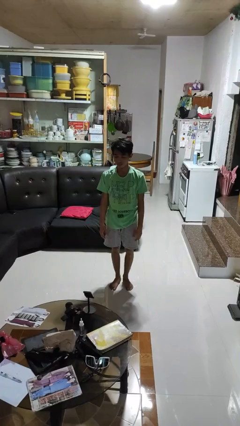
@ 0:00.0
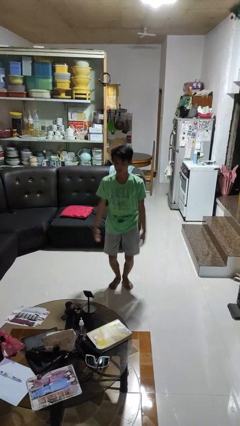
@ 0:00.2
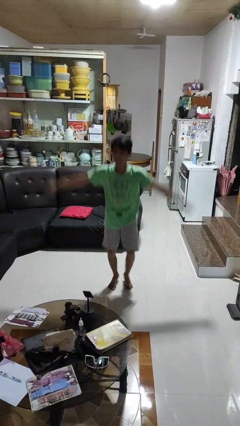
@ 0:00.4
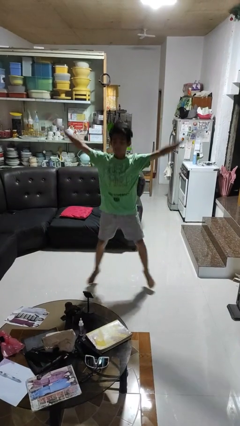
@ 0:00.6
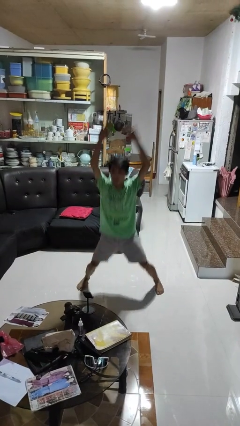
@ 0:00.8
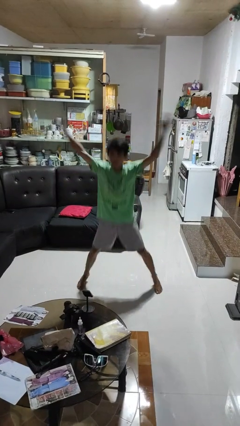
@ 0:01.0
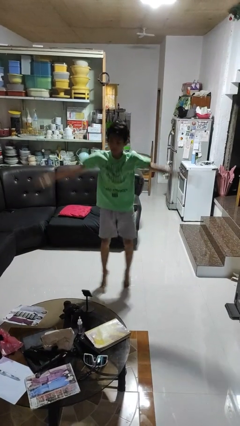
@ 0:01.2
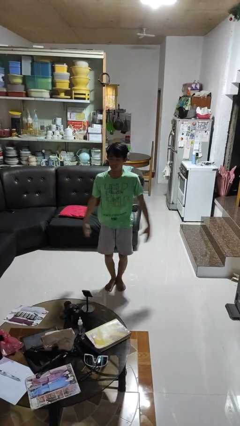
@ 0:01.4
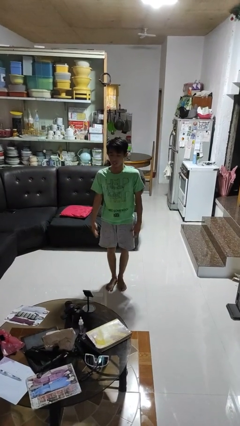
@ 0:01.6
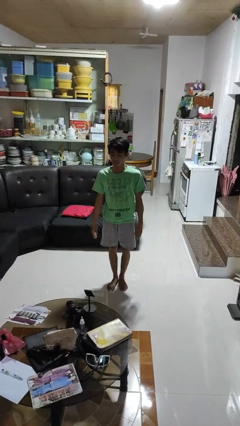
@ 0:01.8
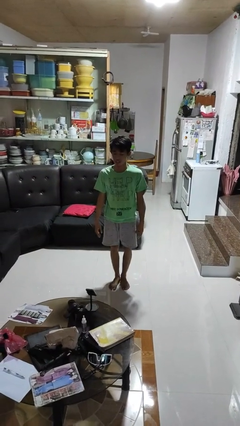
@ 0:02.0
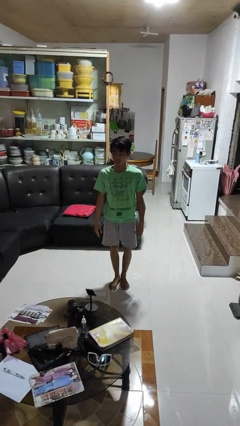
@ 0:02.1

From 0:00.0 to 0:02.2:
person exercises with jumping jacks

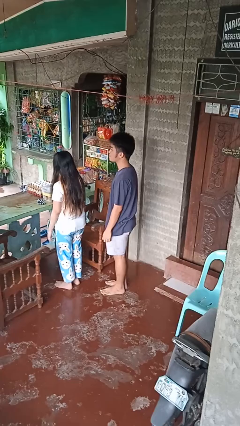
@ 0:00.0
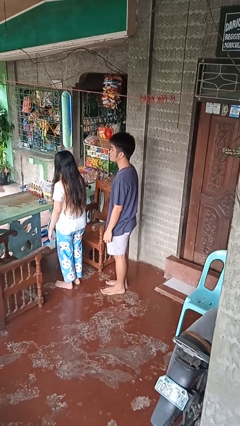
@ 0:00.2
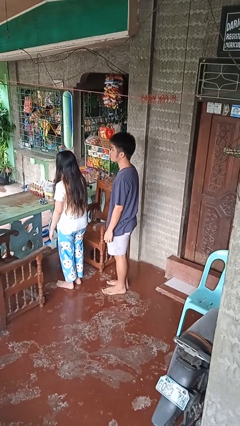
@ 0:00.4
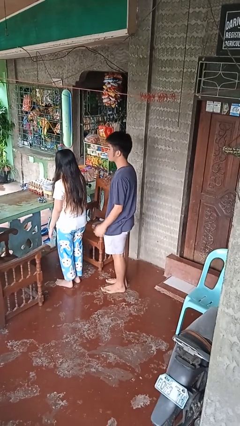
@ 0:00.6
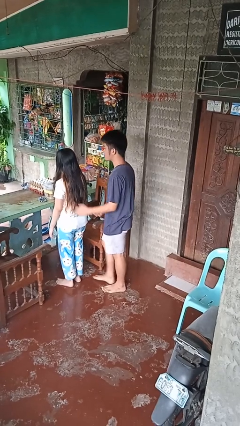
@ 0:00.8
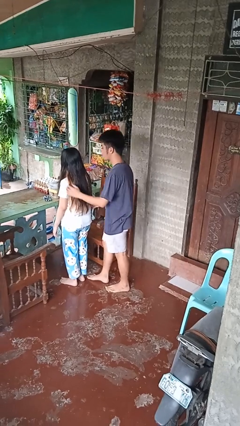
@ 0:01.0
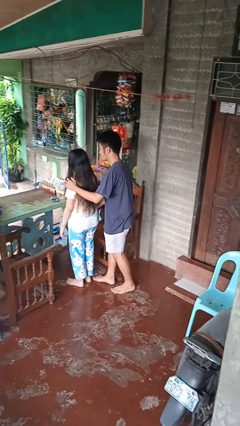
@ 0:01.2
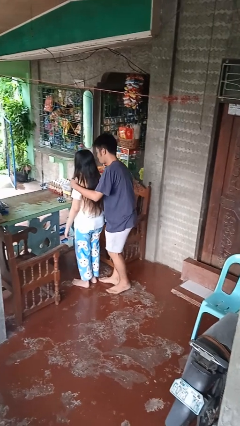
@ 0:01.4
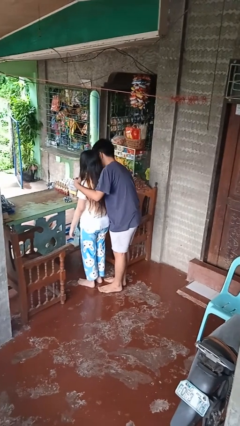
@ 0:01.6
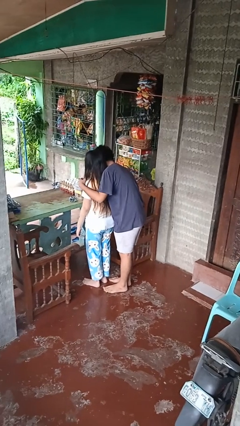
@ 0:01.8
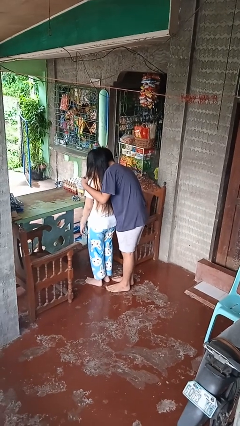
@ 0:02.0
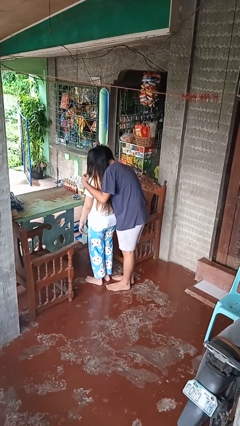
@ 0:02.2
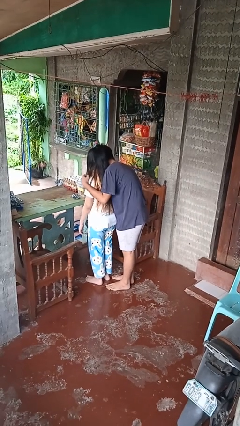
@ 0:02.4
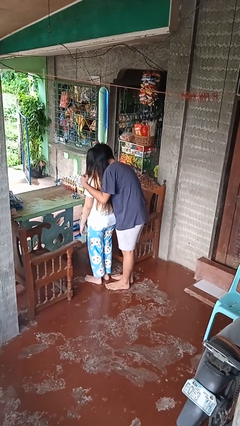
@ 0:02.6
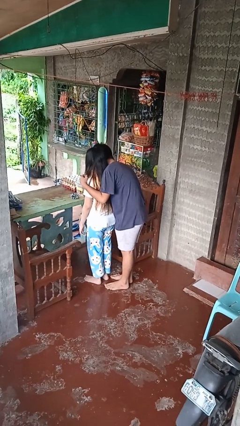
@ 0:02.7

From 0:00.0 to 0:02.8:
person hugs person from behind

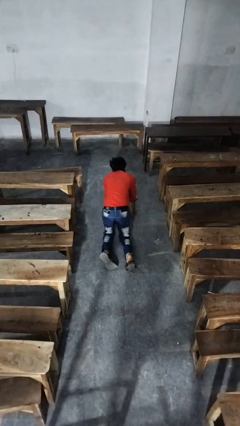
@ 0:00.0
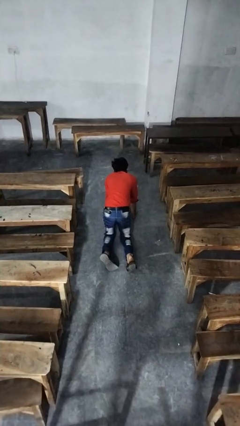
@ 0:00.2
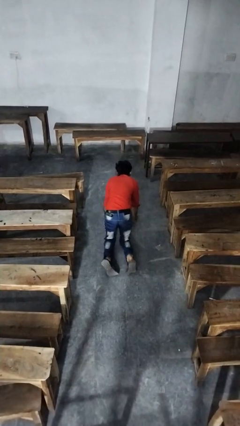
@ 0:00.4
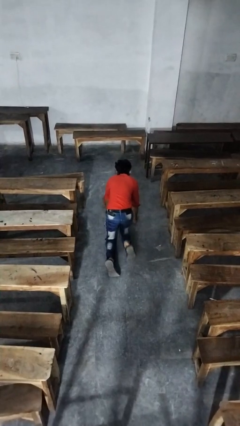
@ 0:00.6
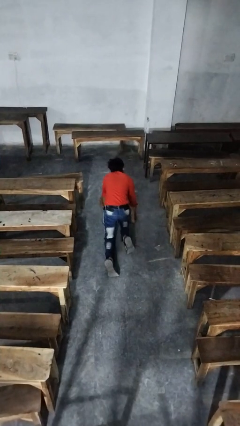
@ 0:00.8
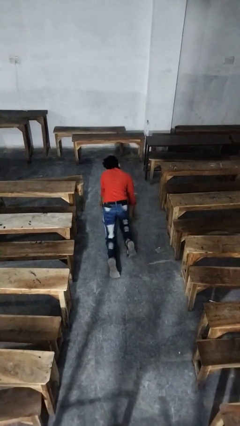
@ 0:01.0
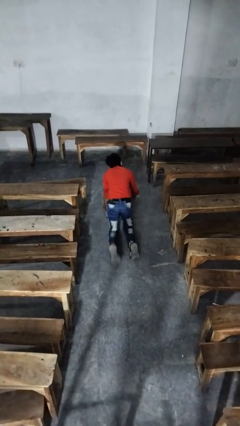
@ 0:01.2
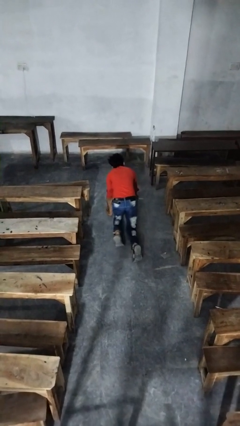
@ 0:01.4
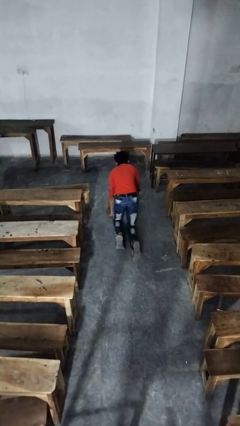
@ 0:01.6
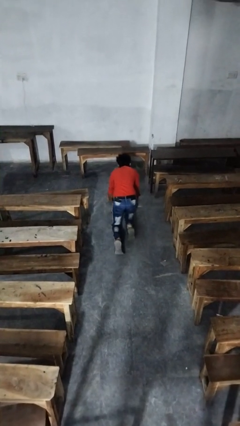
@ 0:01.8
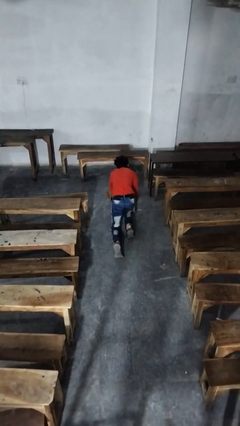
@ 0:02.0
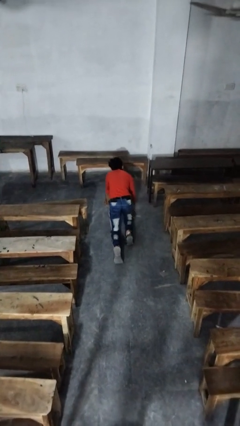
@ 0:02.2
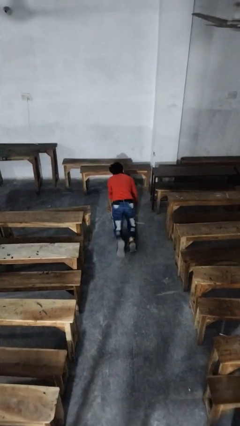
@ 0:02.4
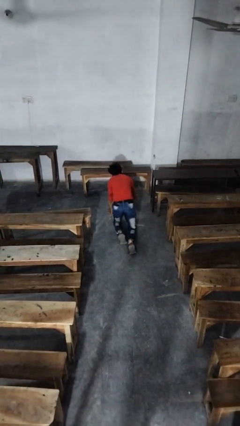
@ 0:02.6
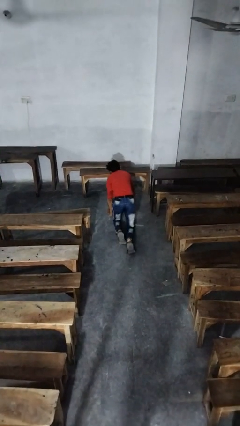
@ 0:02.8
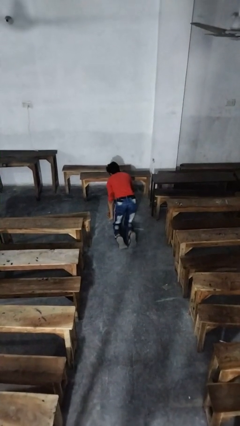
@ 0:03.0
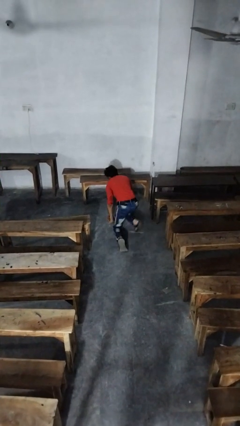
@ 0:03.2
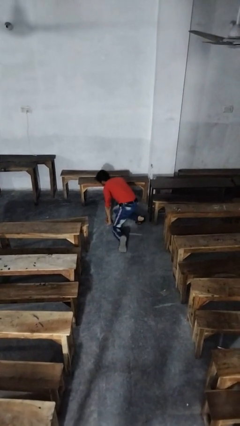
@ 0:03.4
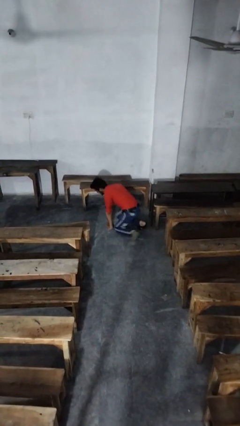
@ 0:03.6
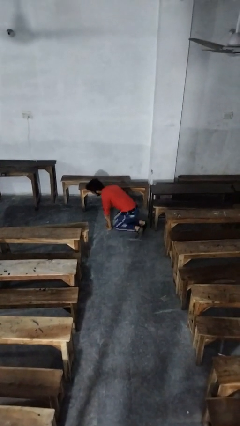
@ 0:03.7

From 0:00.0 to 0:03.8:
person crawls

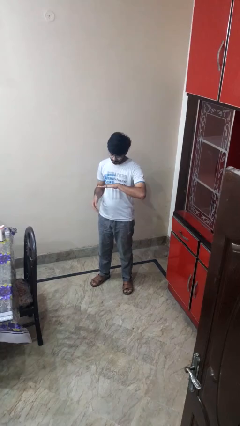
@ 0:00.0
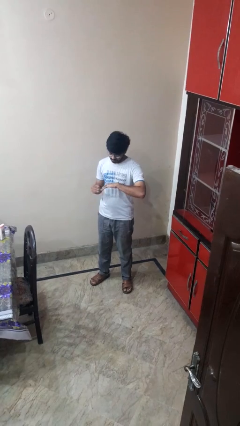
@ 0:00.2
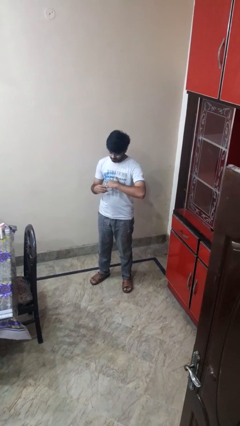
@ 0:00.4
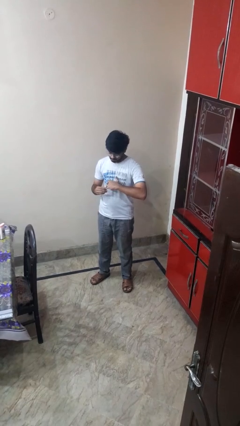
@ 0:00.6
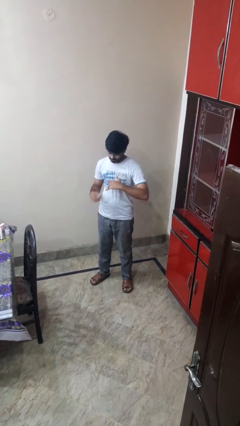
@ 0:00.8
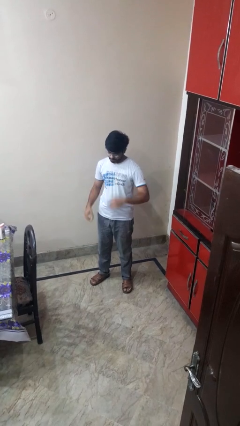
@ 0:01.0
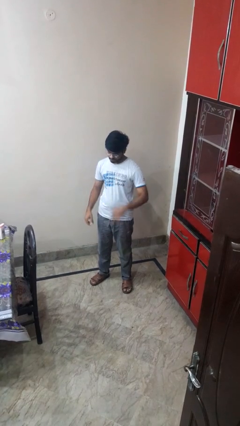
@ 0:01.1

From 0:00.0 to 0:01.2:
person takes off ring

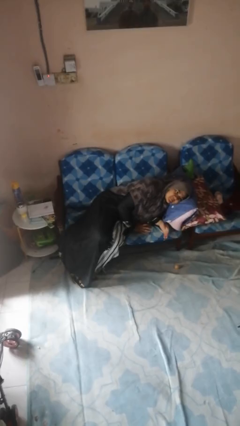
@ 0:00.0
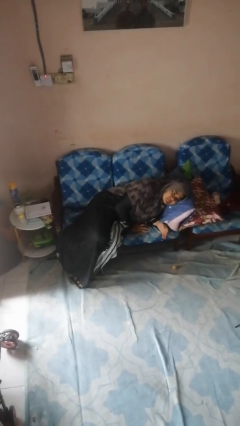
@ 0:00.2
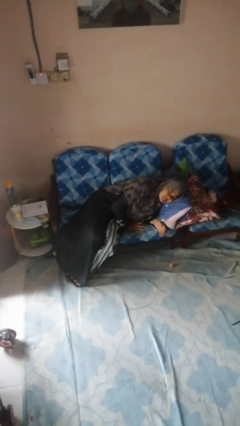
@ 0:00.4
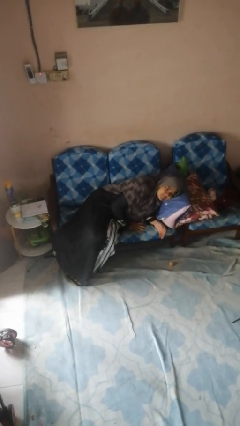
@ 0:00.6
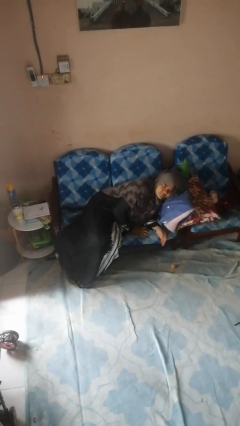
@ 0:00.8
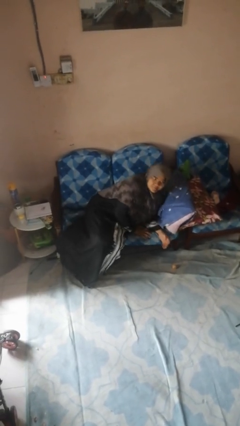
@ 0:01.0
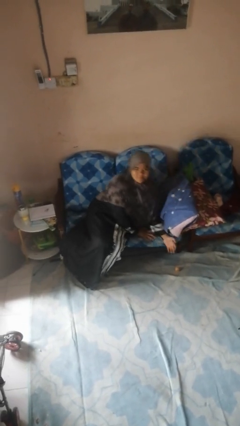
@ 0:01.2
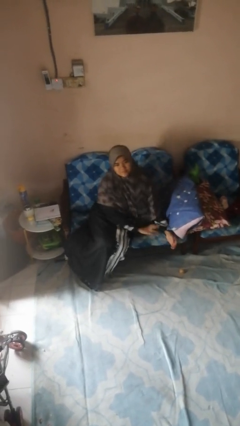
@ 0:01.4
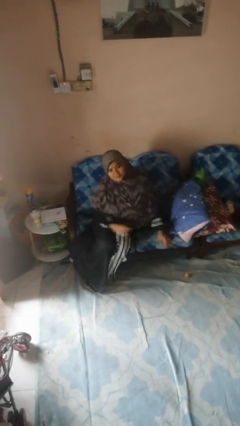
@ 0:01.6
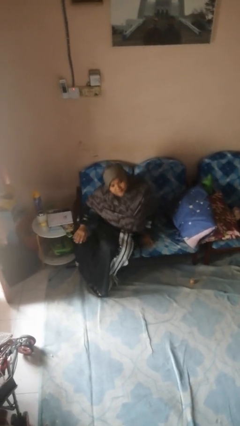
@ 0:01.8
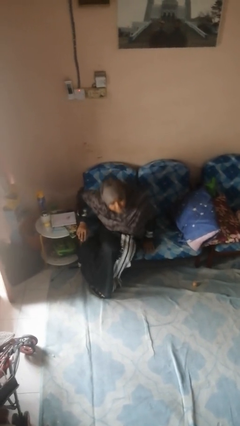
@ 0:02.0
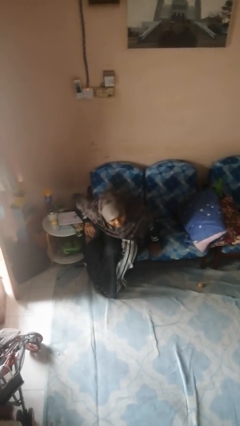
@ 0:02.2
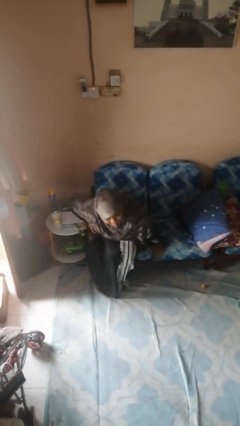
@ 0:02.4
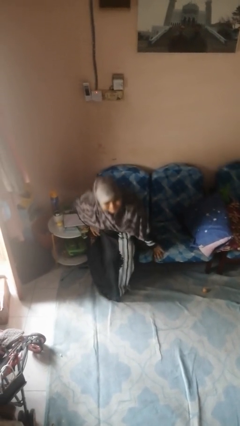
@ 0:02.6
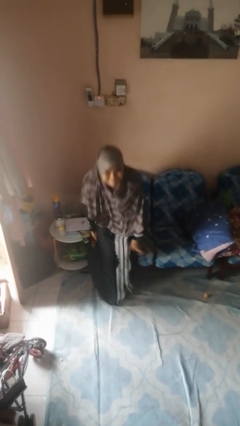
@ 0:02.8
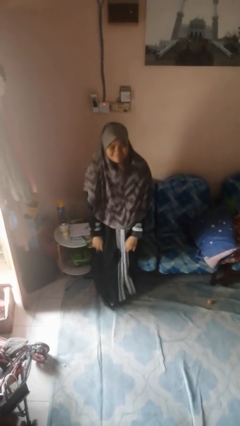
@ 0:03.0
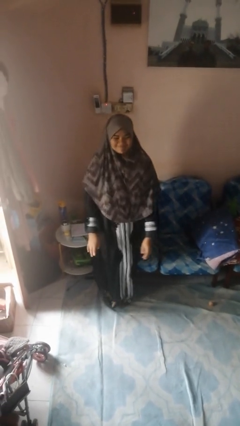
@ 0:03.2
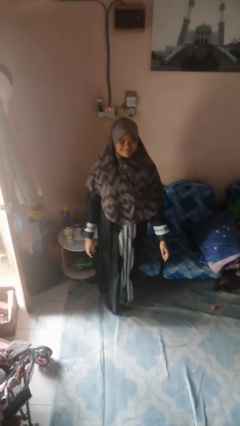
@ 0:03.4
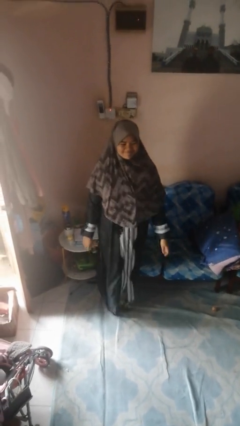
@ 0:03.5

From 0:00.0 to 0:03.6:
person stands up

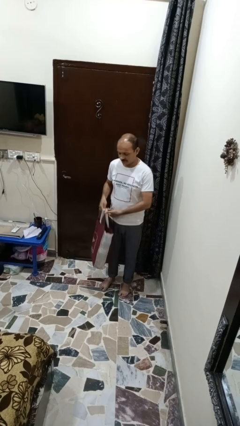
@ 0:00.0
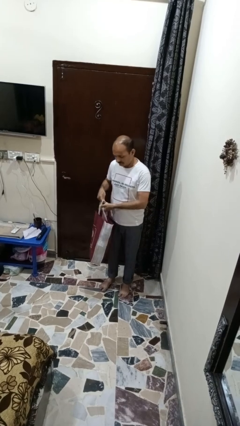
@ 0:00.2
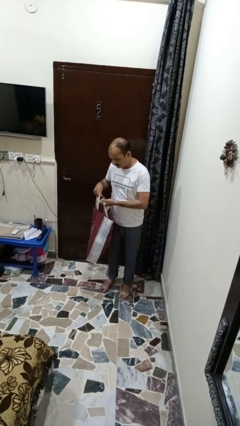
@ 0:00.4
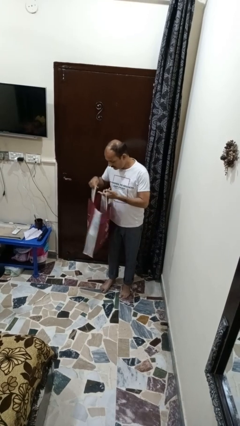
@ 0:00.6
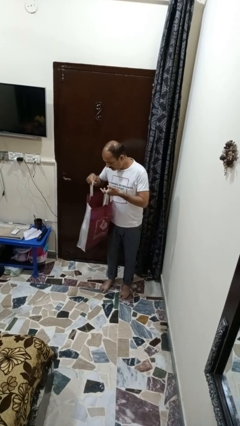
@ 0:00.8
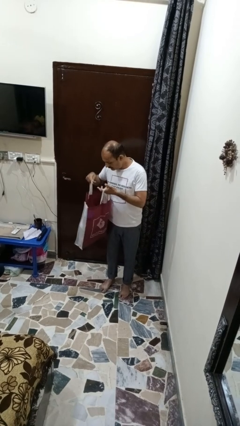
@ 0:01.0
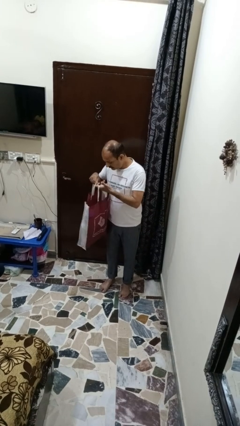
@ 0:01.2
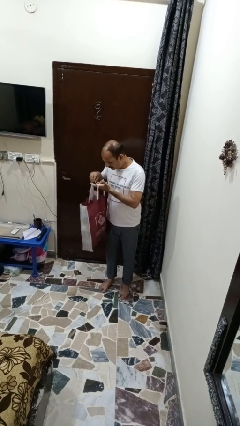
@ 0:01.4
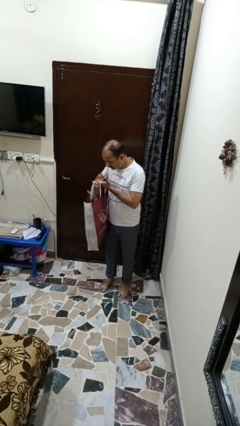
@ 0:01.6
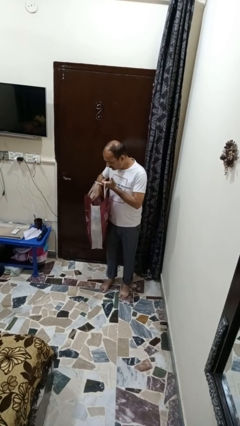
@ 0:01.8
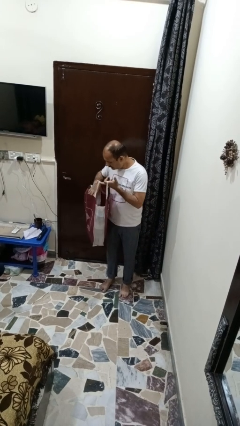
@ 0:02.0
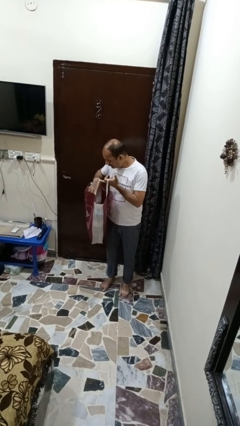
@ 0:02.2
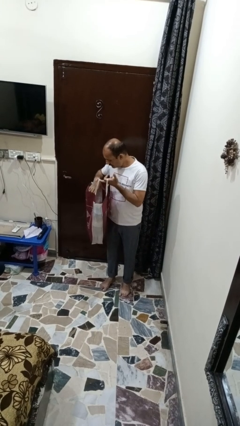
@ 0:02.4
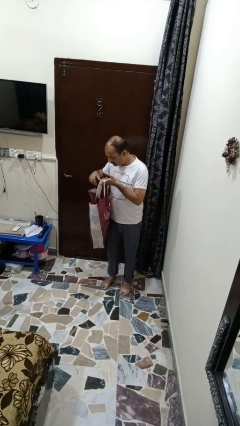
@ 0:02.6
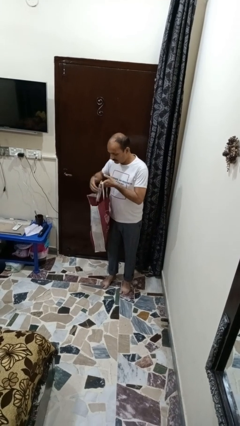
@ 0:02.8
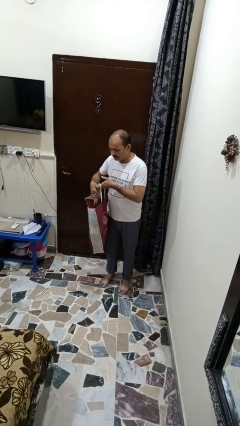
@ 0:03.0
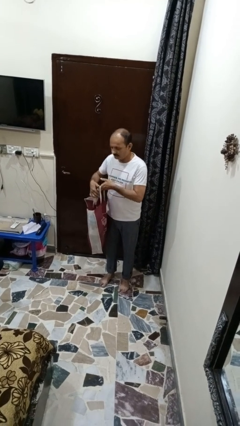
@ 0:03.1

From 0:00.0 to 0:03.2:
person searches in bag
